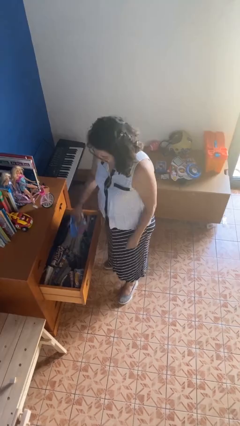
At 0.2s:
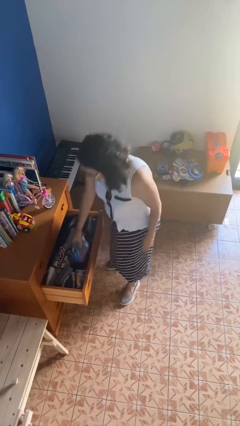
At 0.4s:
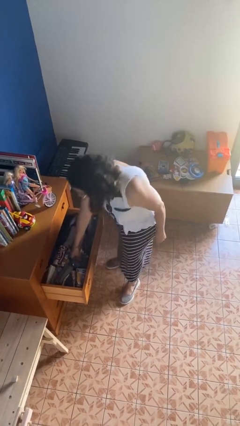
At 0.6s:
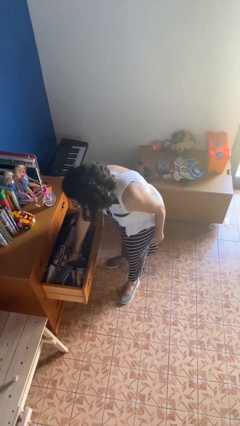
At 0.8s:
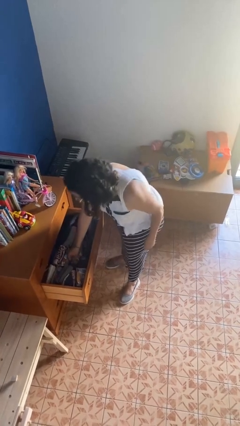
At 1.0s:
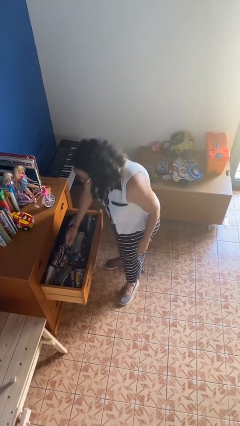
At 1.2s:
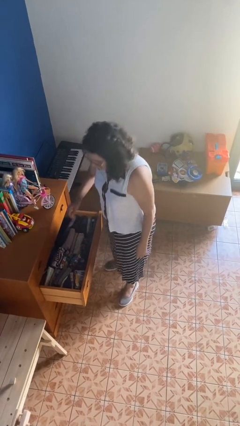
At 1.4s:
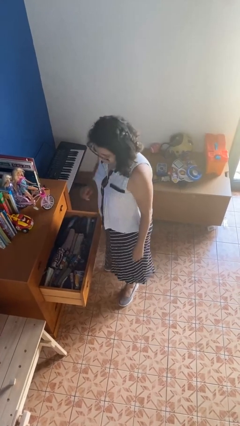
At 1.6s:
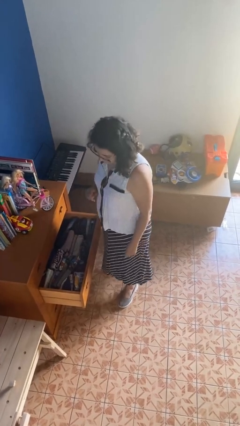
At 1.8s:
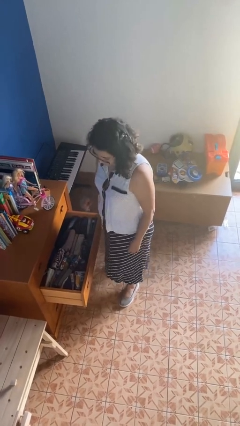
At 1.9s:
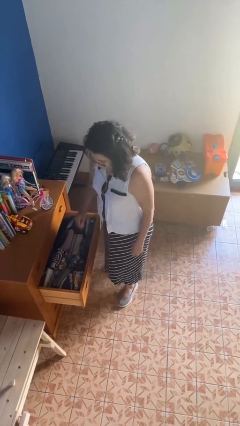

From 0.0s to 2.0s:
person puts clothes into dresser

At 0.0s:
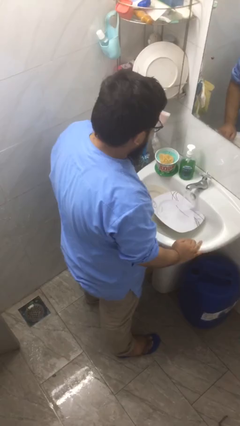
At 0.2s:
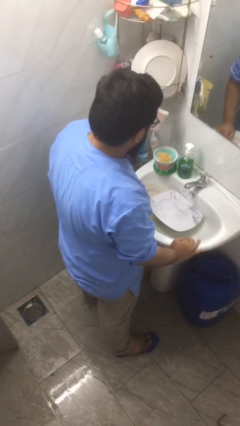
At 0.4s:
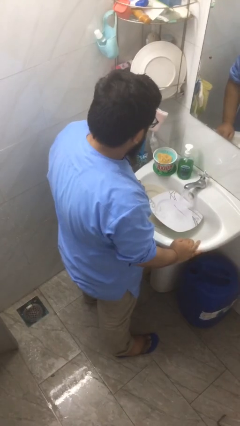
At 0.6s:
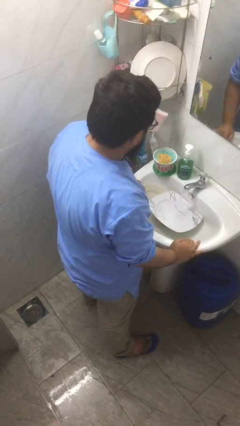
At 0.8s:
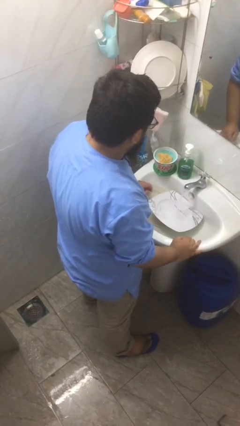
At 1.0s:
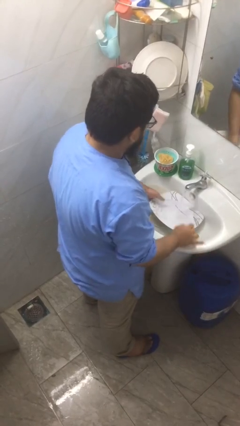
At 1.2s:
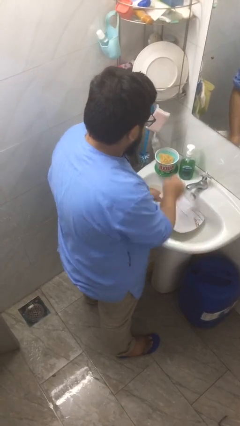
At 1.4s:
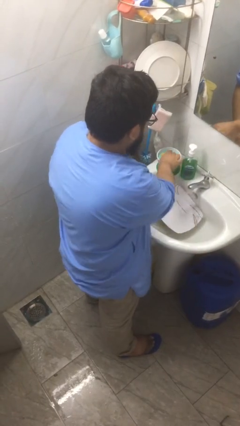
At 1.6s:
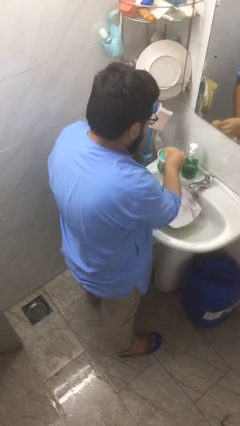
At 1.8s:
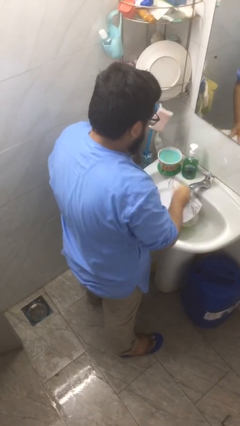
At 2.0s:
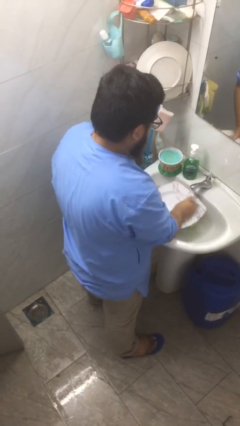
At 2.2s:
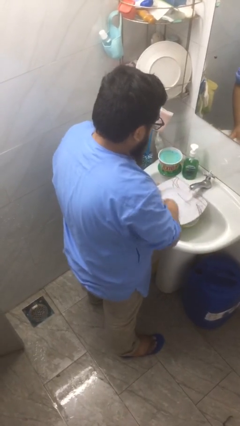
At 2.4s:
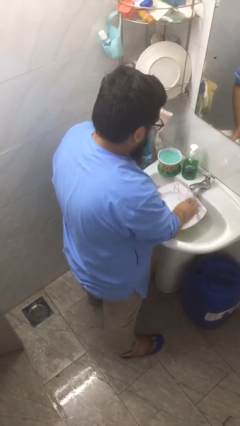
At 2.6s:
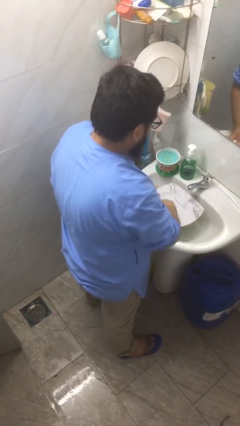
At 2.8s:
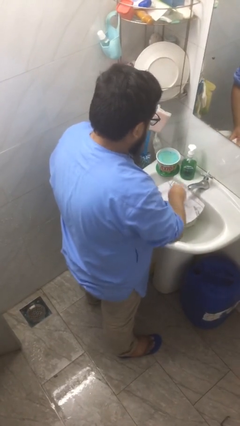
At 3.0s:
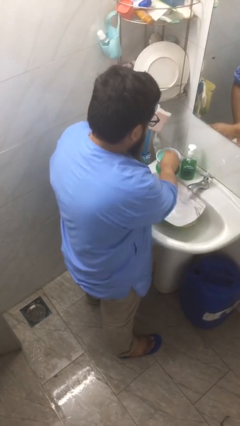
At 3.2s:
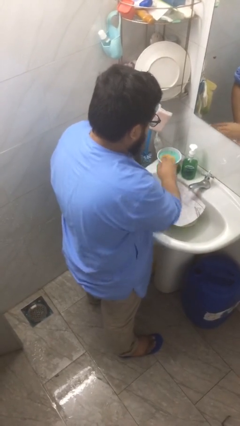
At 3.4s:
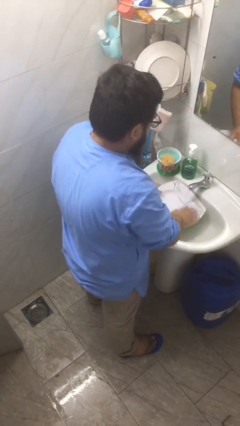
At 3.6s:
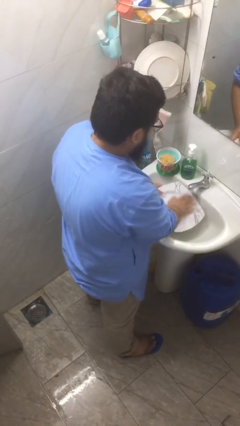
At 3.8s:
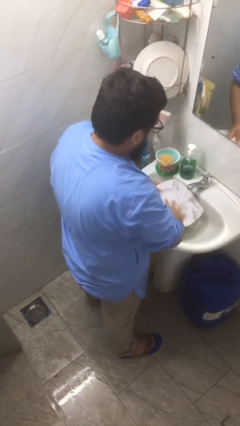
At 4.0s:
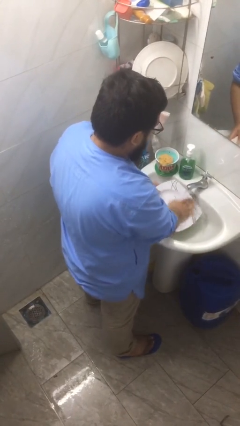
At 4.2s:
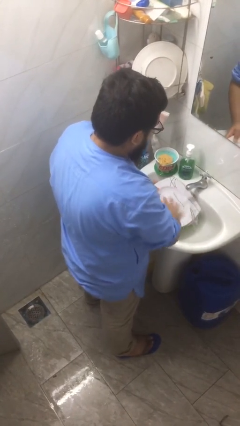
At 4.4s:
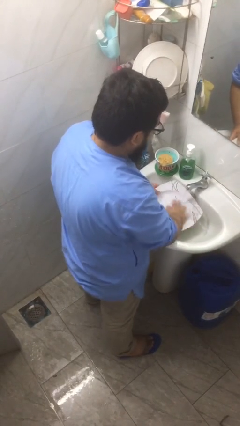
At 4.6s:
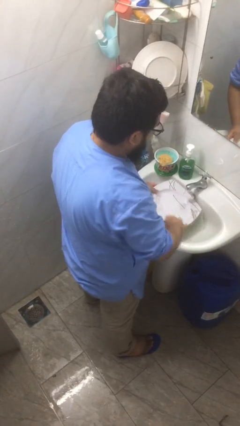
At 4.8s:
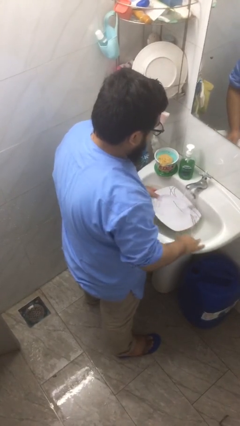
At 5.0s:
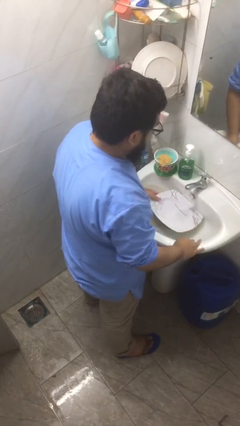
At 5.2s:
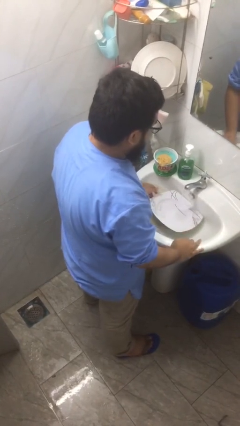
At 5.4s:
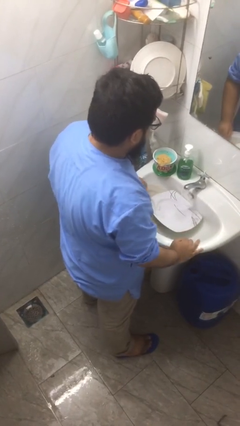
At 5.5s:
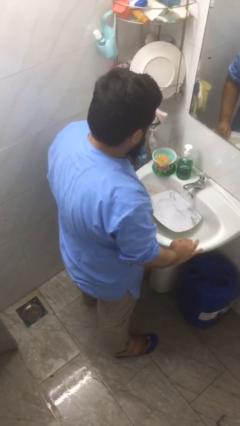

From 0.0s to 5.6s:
person washes dish

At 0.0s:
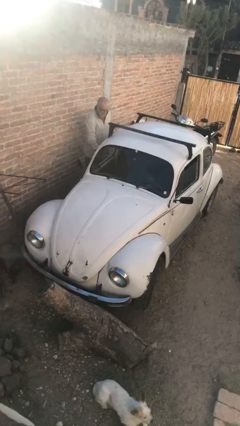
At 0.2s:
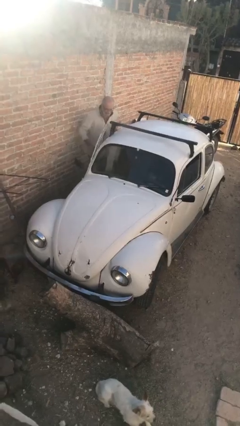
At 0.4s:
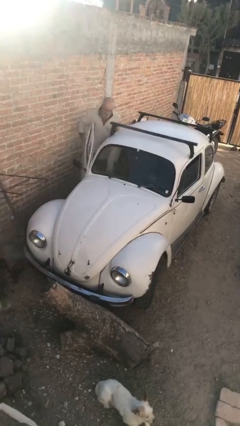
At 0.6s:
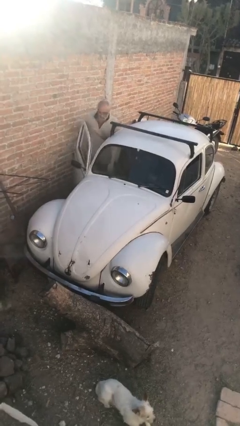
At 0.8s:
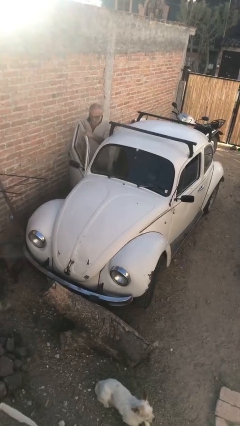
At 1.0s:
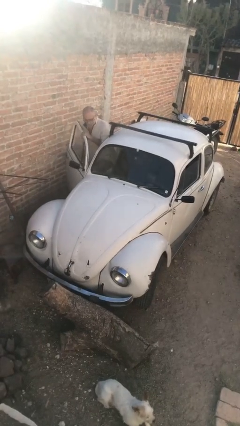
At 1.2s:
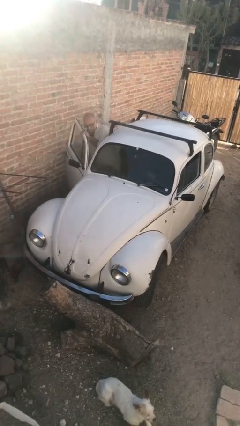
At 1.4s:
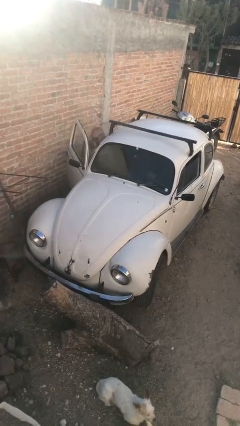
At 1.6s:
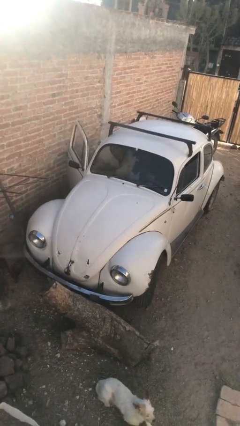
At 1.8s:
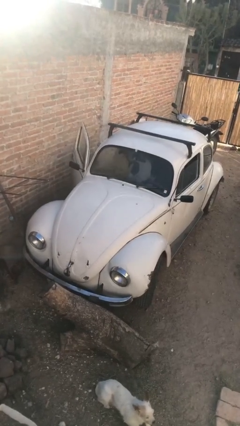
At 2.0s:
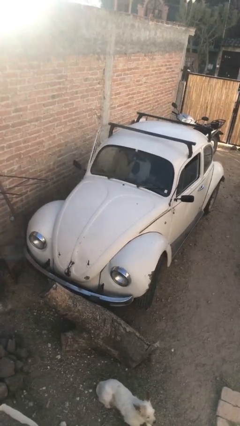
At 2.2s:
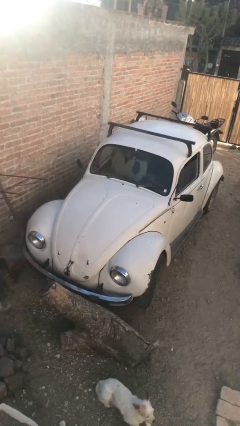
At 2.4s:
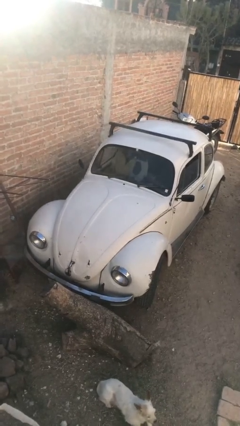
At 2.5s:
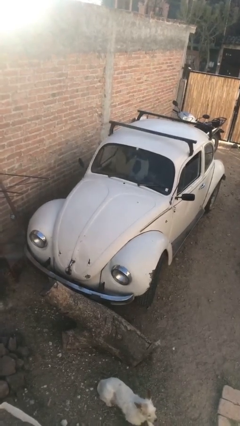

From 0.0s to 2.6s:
car picks up person

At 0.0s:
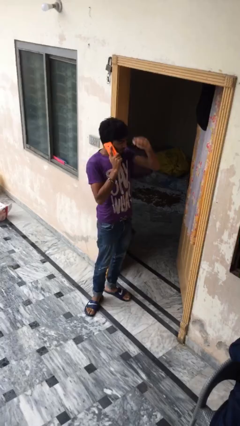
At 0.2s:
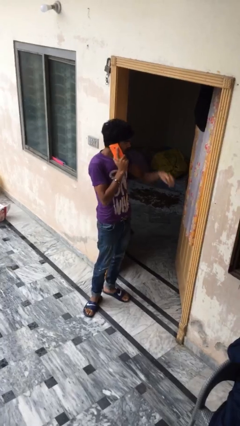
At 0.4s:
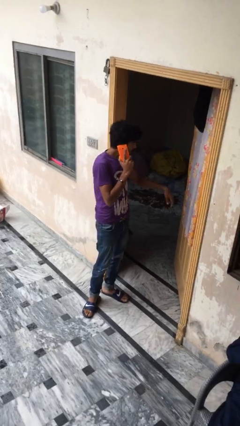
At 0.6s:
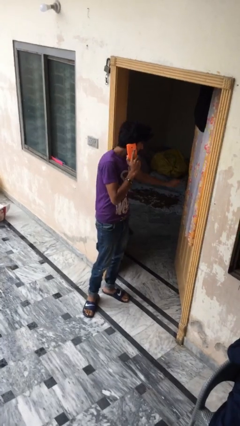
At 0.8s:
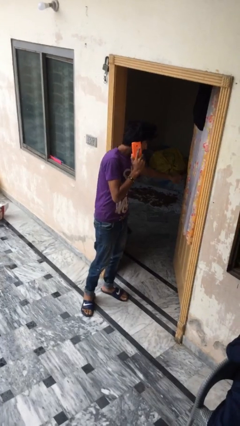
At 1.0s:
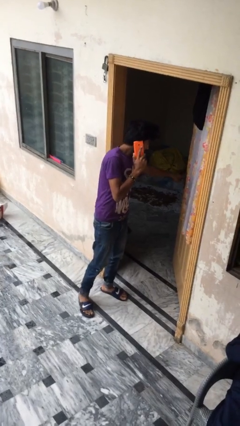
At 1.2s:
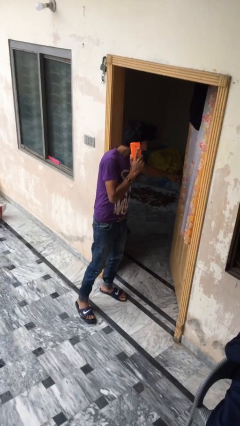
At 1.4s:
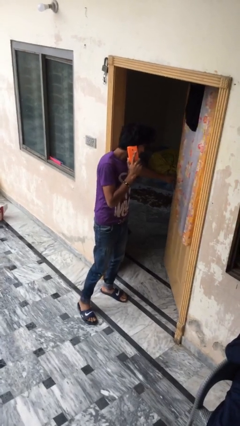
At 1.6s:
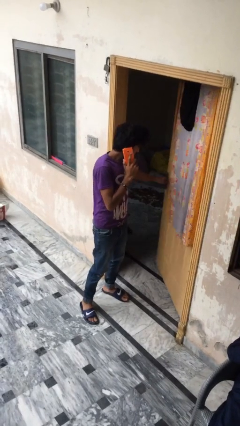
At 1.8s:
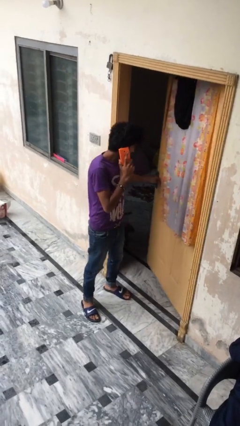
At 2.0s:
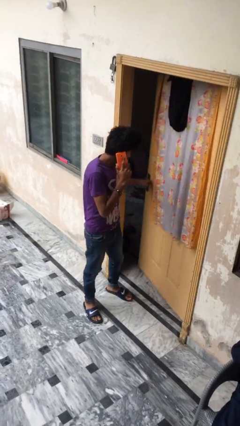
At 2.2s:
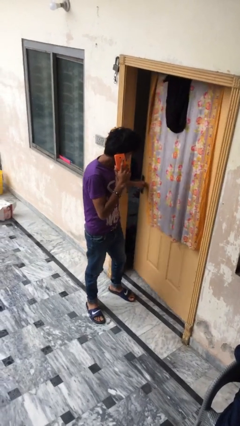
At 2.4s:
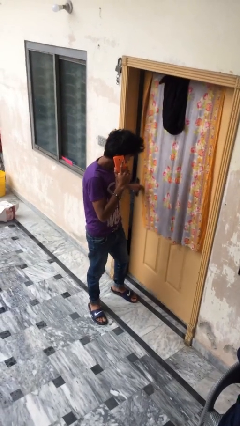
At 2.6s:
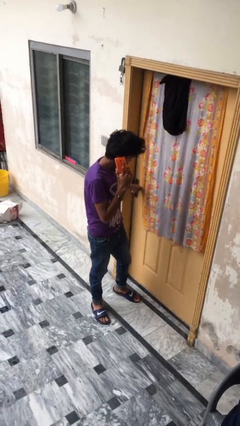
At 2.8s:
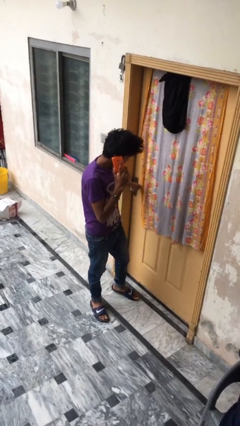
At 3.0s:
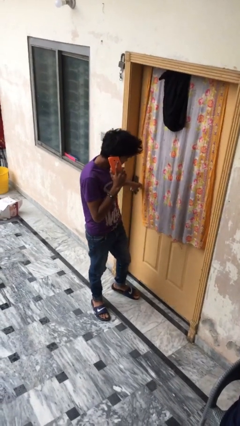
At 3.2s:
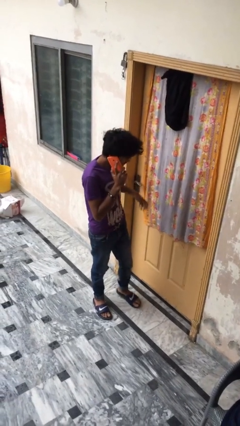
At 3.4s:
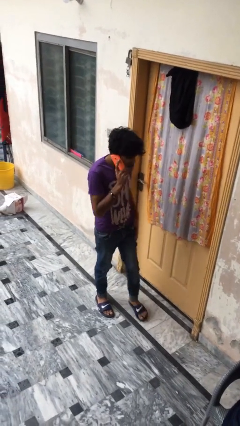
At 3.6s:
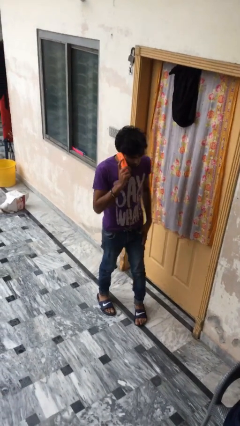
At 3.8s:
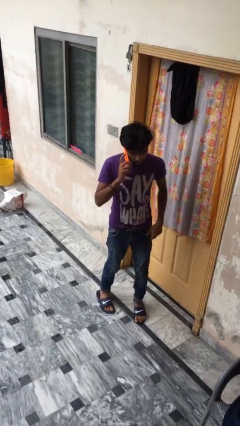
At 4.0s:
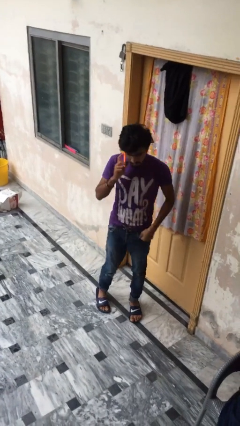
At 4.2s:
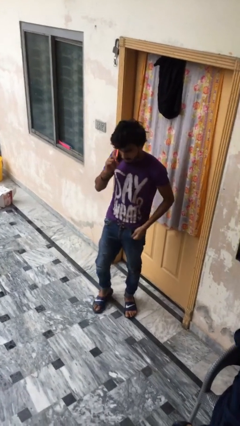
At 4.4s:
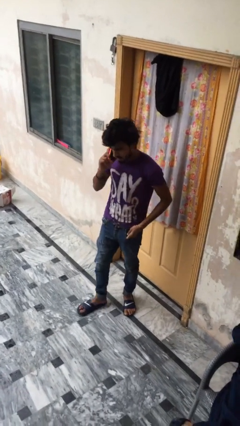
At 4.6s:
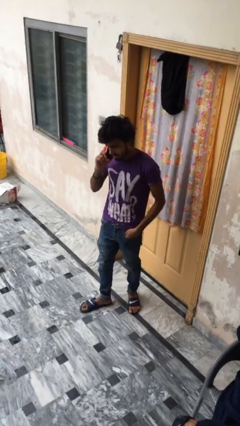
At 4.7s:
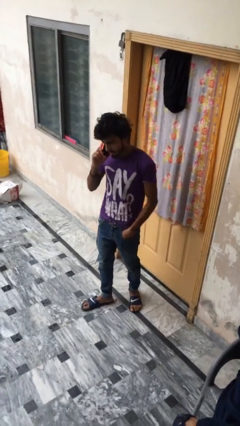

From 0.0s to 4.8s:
person closes facility door

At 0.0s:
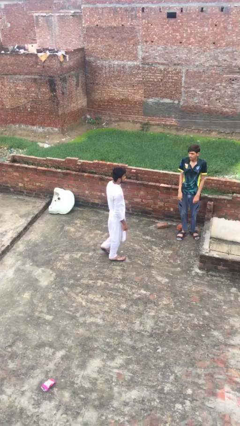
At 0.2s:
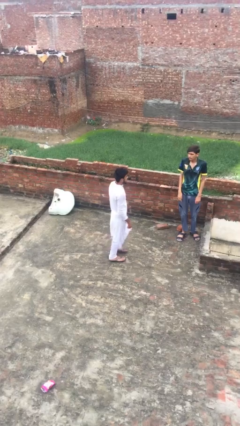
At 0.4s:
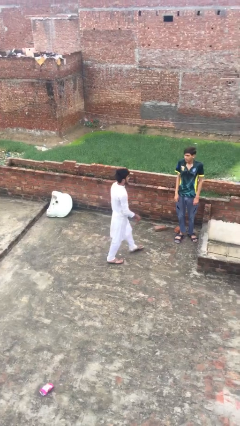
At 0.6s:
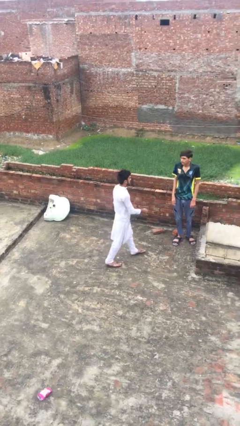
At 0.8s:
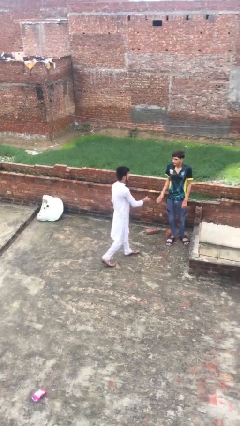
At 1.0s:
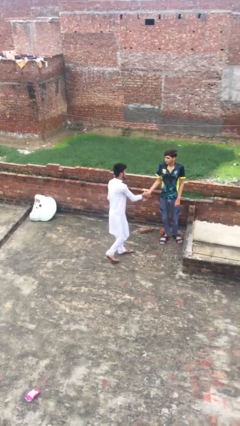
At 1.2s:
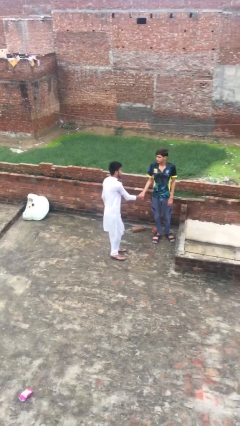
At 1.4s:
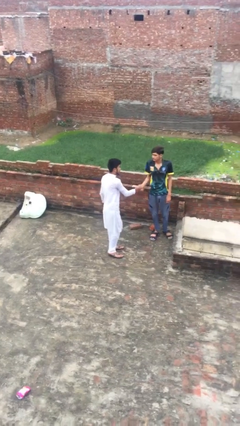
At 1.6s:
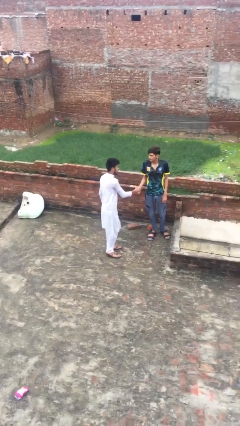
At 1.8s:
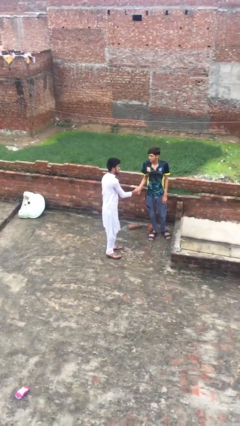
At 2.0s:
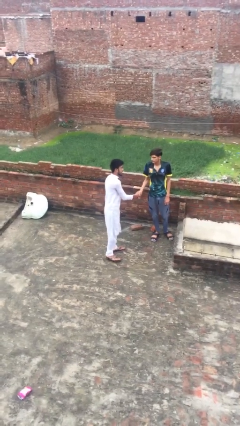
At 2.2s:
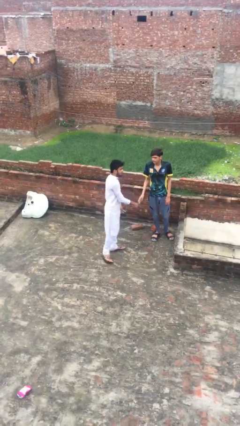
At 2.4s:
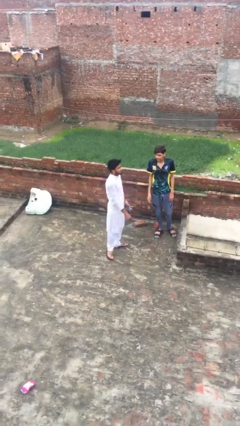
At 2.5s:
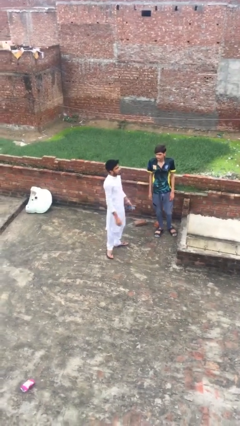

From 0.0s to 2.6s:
person shakes hand
